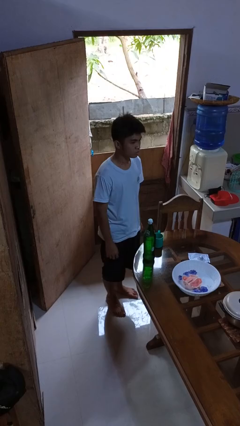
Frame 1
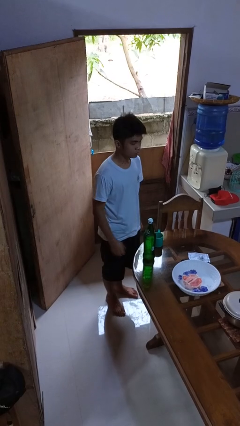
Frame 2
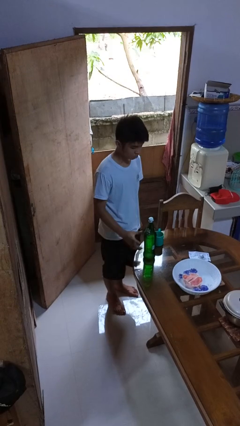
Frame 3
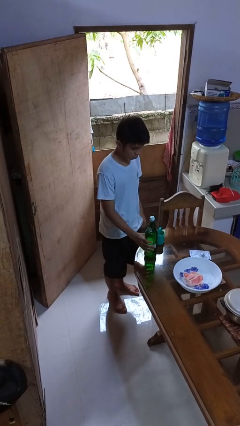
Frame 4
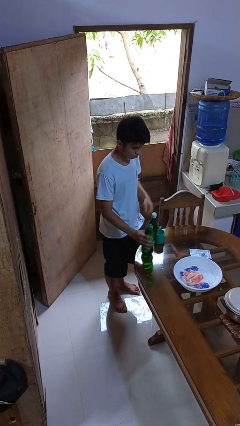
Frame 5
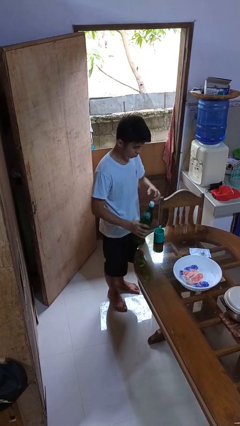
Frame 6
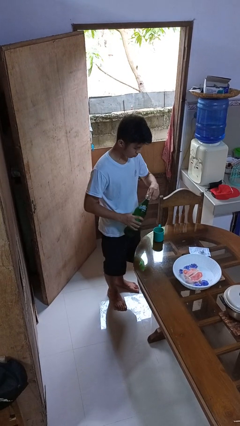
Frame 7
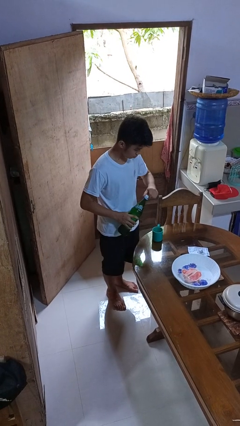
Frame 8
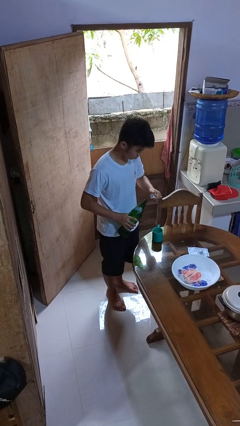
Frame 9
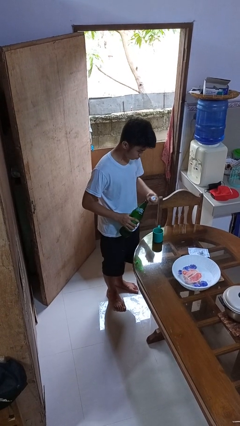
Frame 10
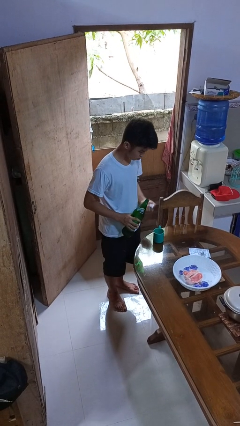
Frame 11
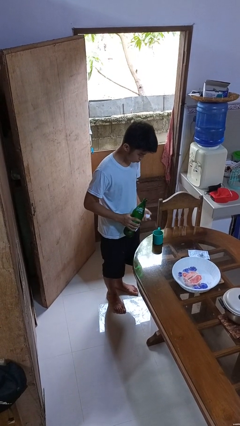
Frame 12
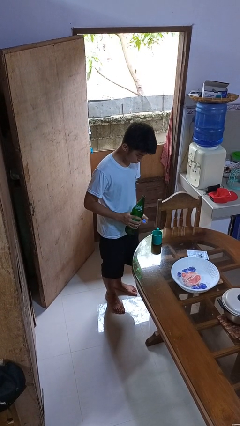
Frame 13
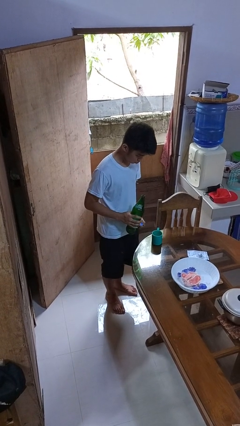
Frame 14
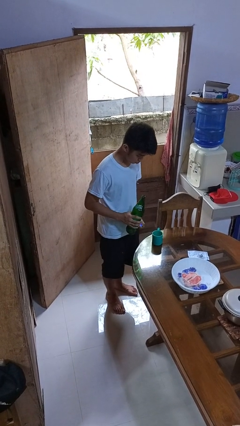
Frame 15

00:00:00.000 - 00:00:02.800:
person unscrews lid from bottle

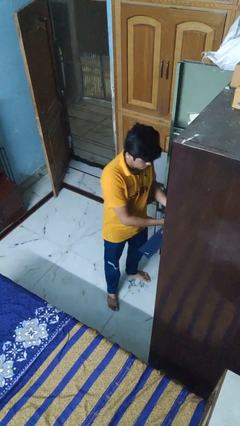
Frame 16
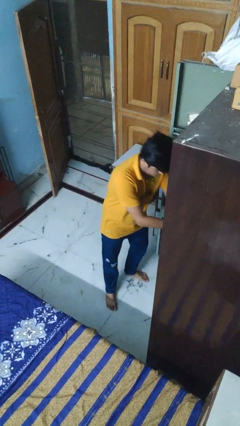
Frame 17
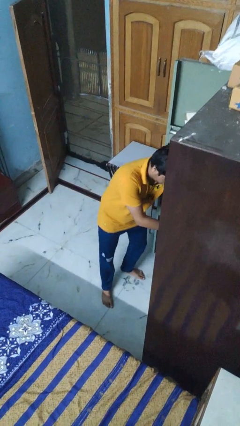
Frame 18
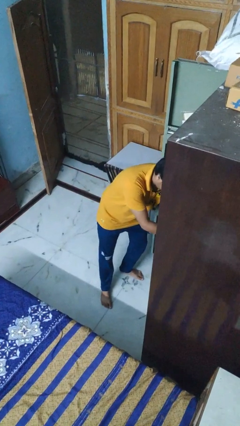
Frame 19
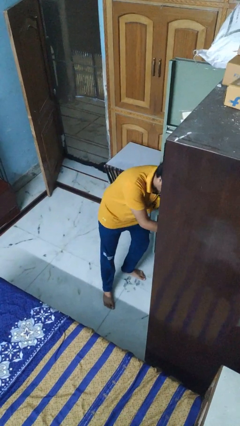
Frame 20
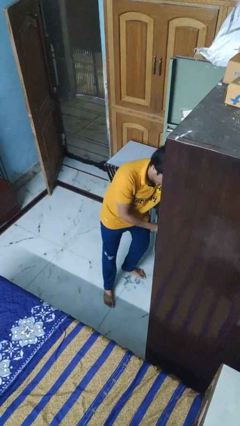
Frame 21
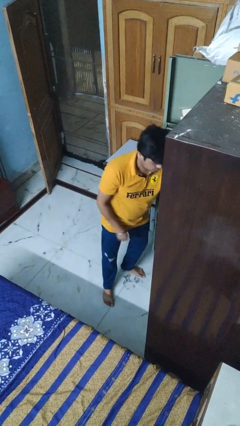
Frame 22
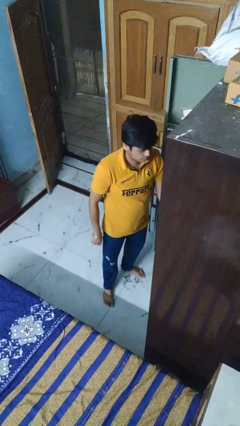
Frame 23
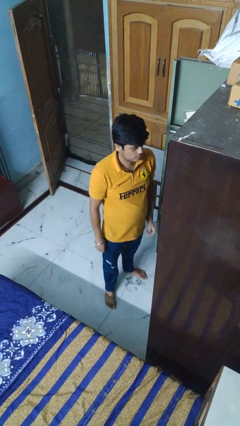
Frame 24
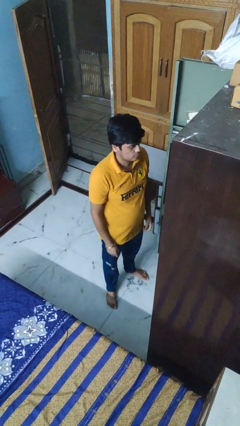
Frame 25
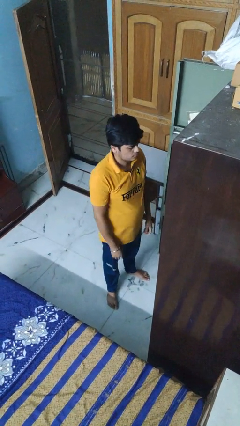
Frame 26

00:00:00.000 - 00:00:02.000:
person puts clothes into dresser

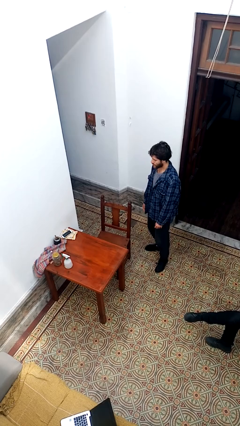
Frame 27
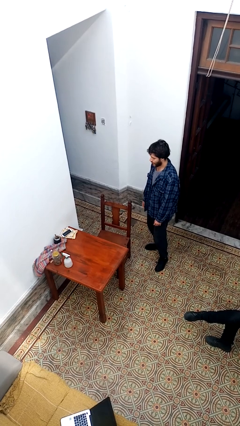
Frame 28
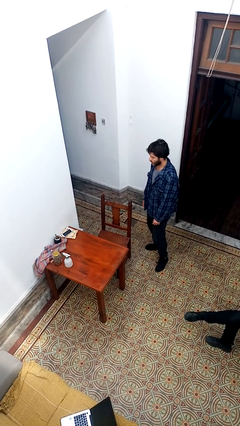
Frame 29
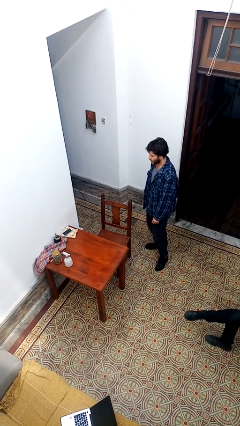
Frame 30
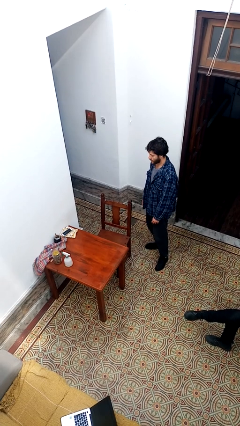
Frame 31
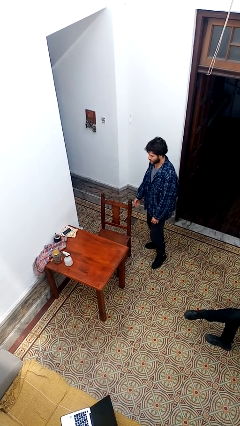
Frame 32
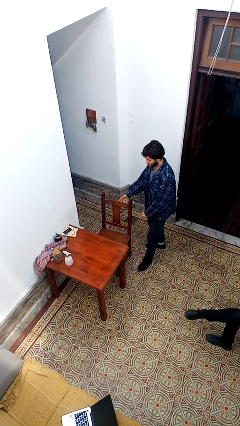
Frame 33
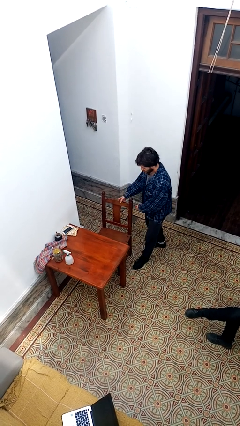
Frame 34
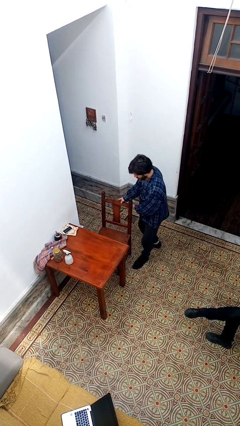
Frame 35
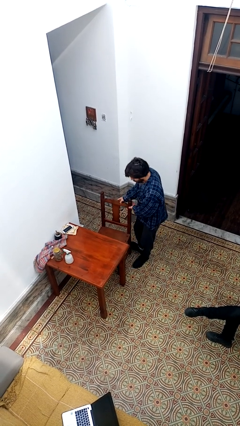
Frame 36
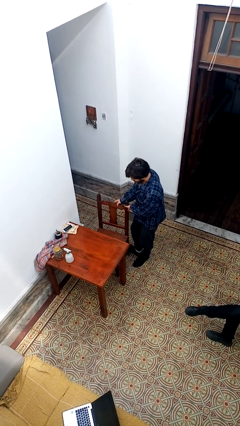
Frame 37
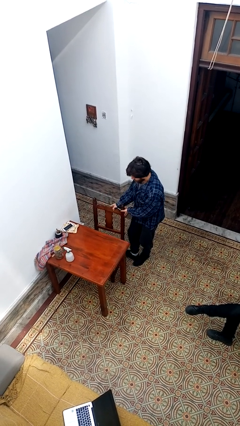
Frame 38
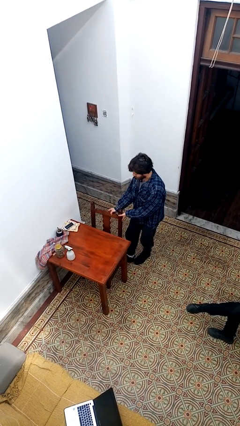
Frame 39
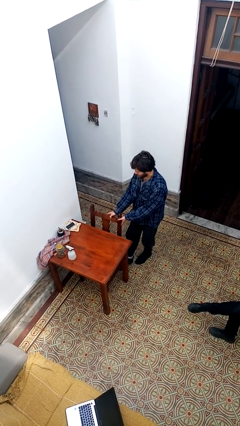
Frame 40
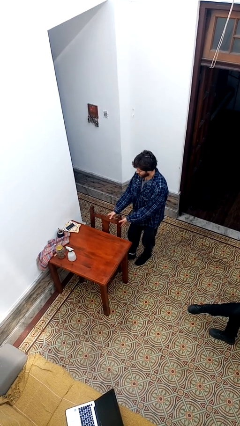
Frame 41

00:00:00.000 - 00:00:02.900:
person pushes in chair

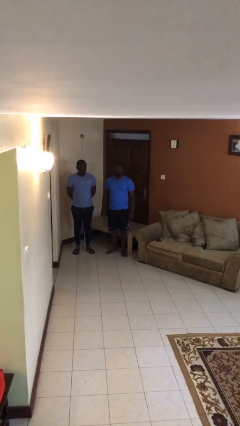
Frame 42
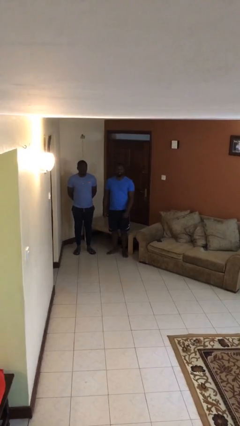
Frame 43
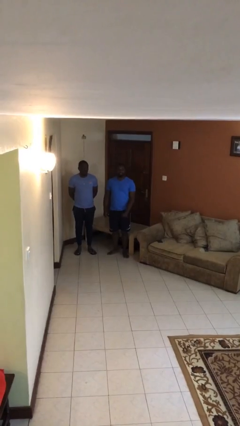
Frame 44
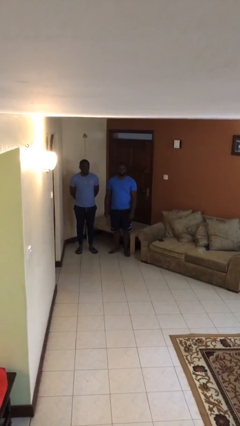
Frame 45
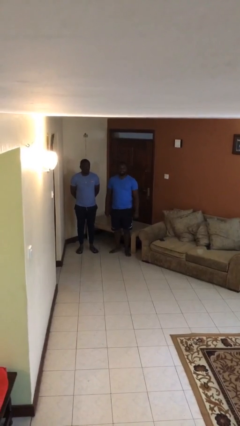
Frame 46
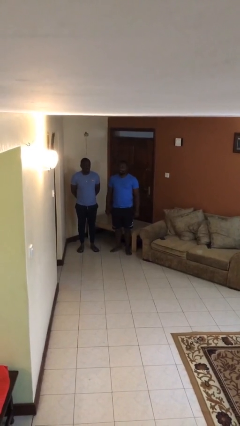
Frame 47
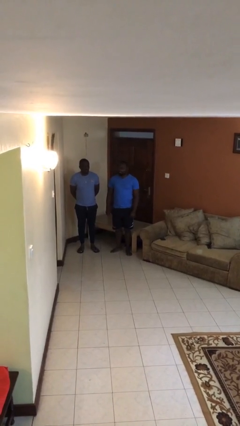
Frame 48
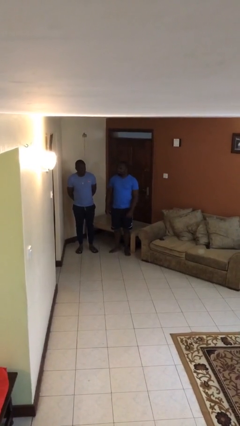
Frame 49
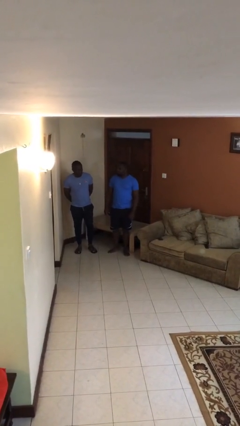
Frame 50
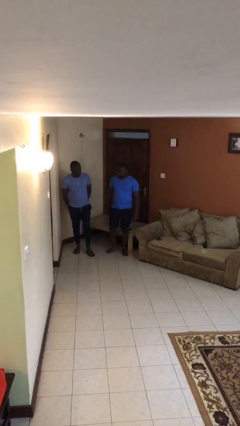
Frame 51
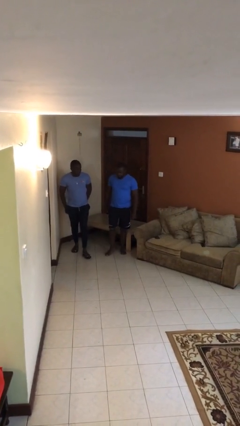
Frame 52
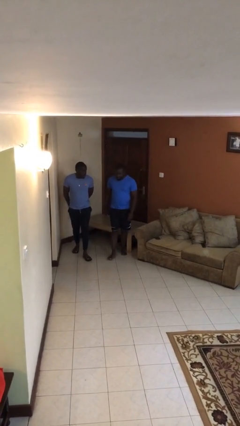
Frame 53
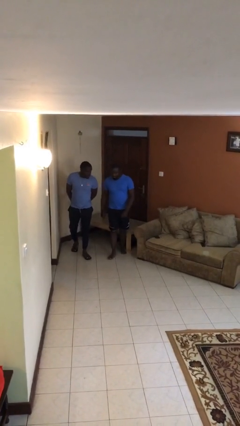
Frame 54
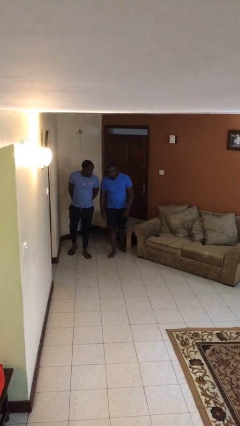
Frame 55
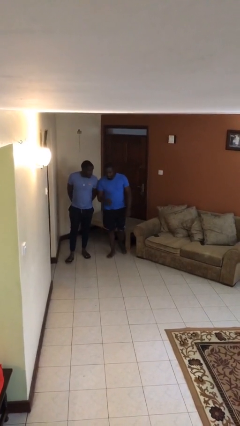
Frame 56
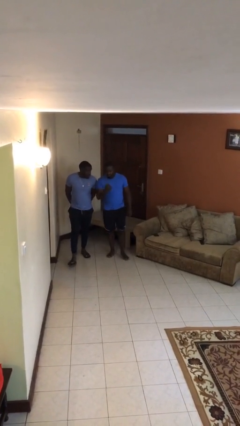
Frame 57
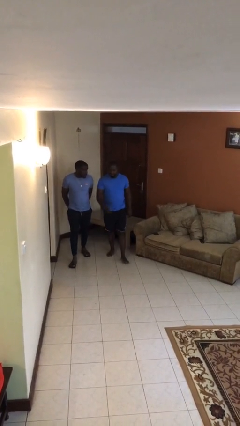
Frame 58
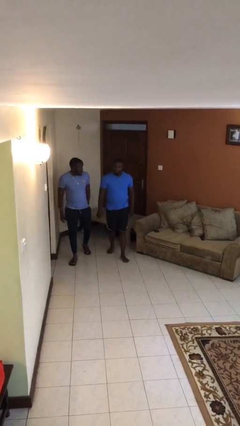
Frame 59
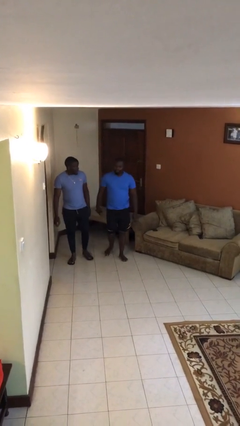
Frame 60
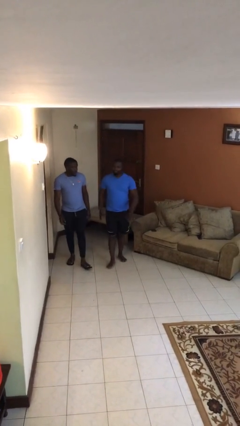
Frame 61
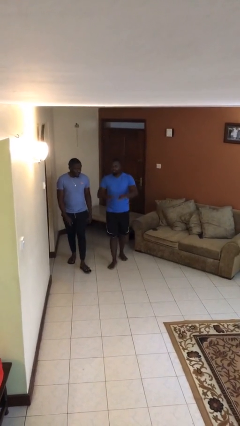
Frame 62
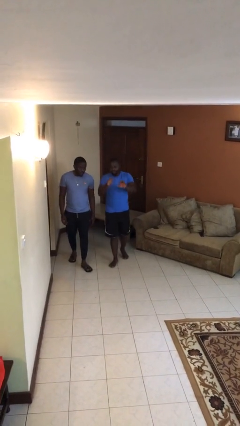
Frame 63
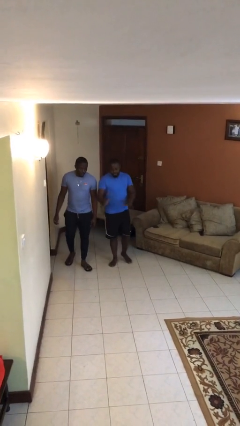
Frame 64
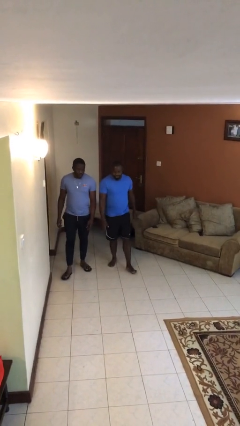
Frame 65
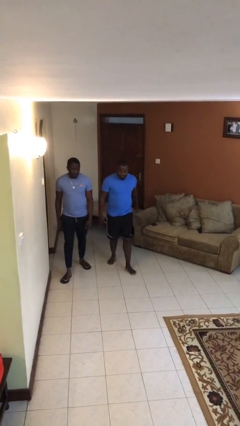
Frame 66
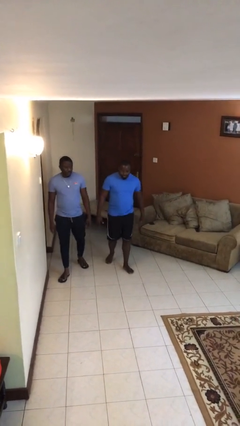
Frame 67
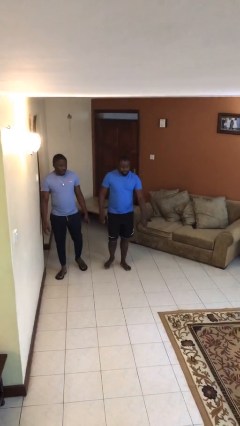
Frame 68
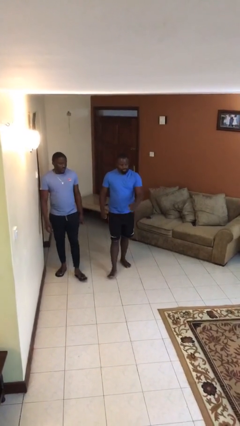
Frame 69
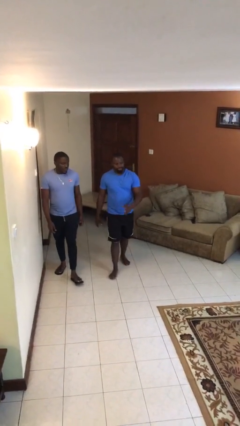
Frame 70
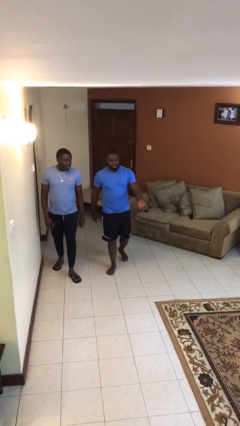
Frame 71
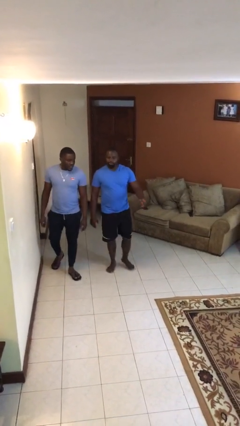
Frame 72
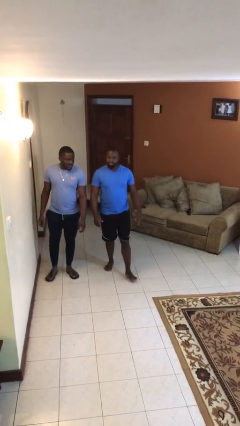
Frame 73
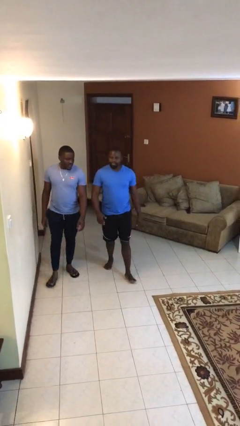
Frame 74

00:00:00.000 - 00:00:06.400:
person talks to person

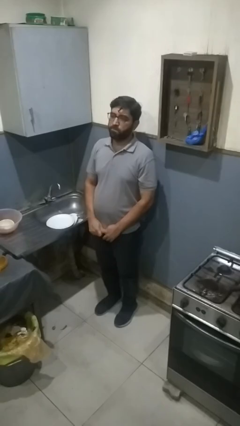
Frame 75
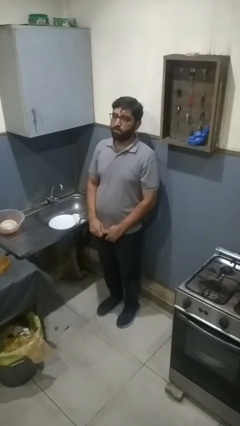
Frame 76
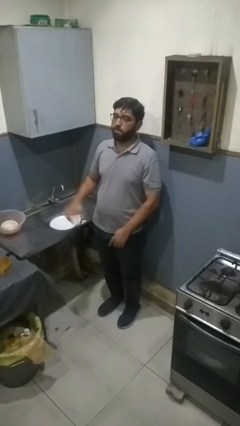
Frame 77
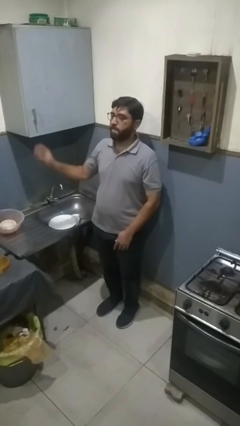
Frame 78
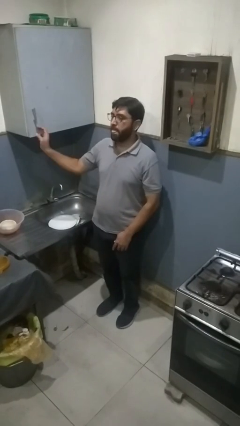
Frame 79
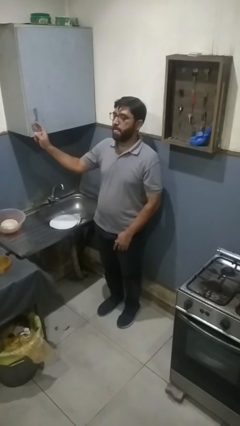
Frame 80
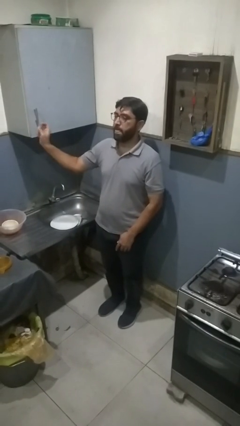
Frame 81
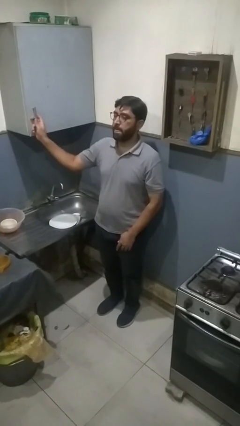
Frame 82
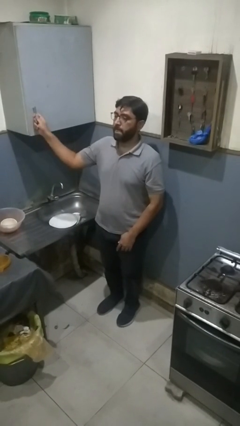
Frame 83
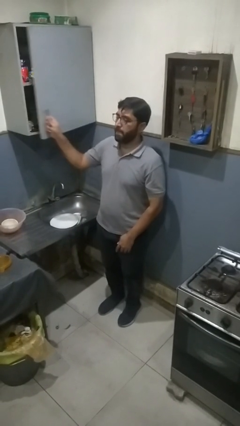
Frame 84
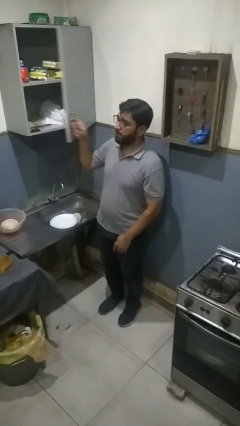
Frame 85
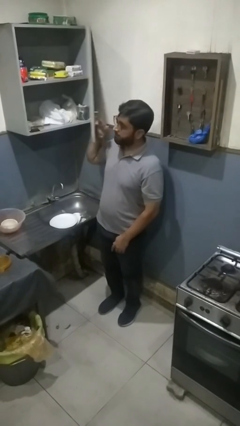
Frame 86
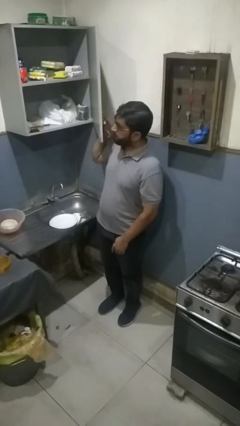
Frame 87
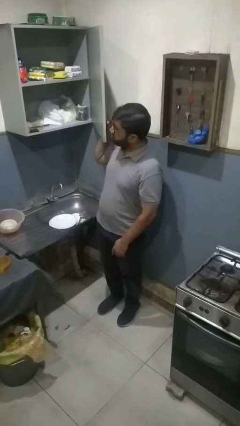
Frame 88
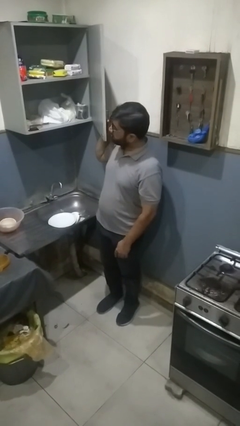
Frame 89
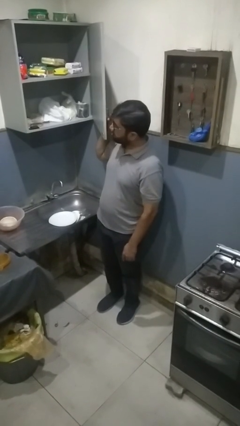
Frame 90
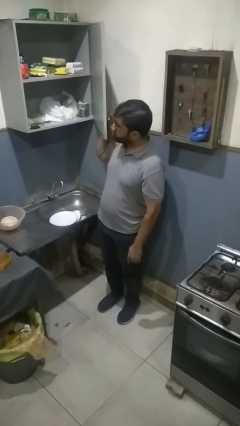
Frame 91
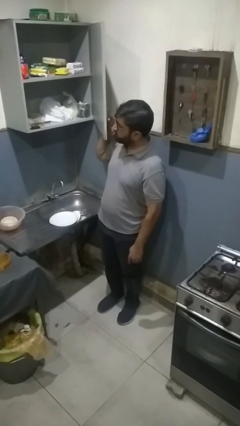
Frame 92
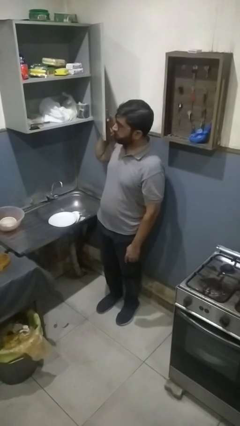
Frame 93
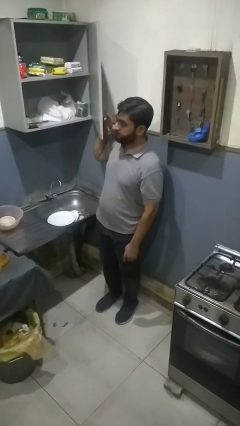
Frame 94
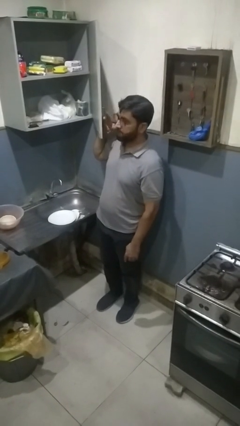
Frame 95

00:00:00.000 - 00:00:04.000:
person opens cabinet
